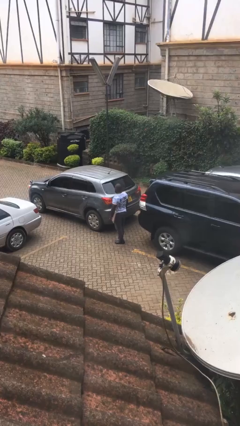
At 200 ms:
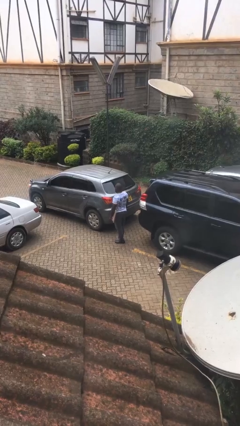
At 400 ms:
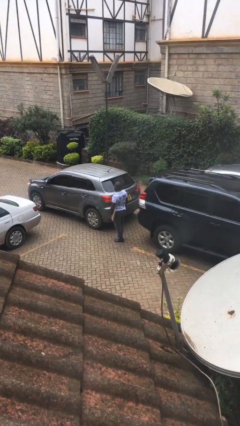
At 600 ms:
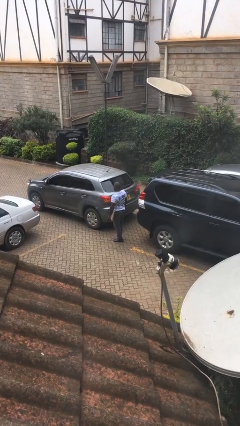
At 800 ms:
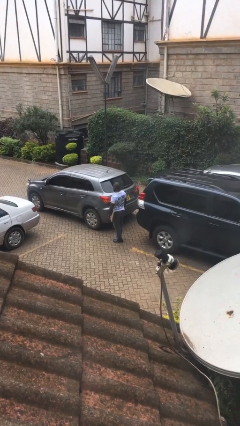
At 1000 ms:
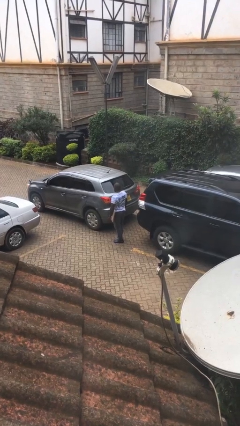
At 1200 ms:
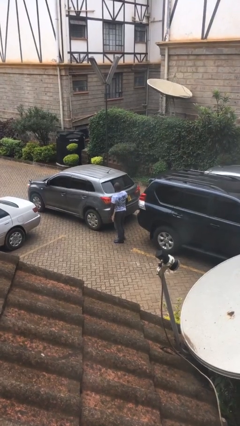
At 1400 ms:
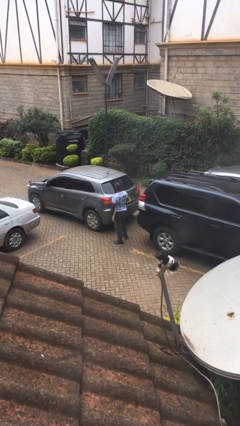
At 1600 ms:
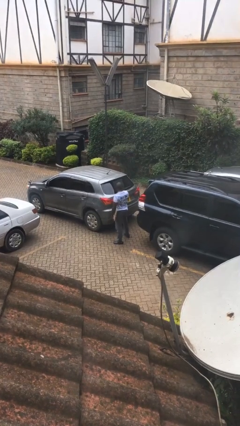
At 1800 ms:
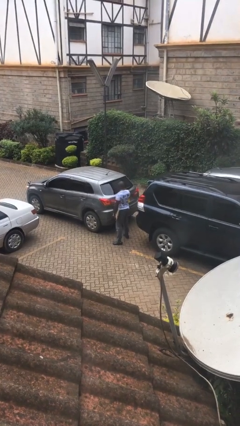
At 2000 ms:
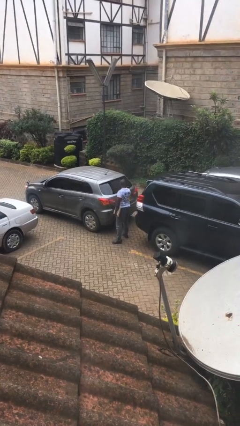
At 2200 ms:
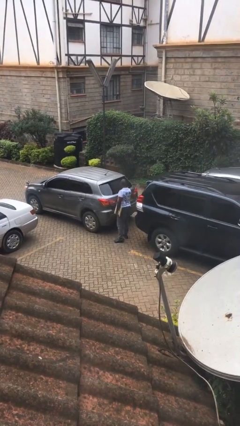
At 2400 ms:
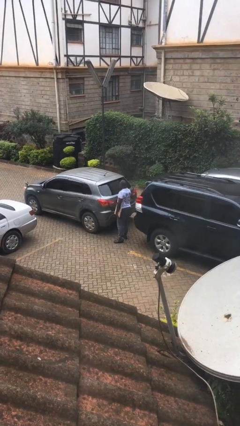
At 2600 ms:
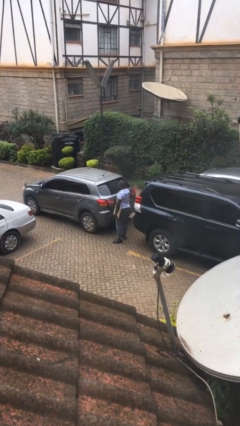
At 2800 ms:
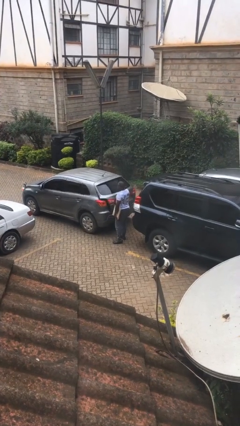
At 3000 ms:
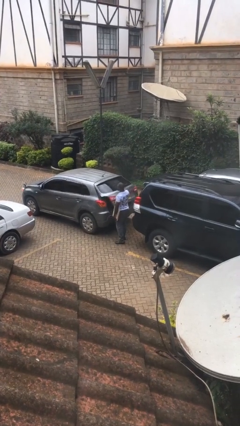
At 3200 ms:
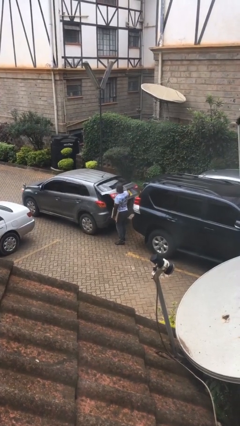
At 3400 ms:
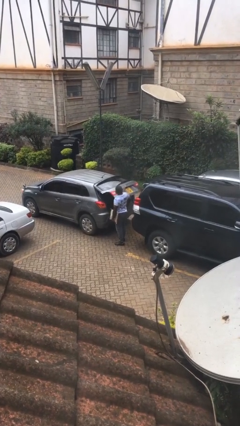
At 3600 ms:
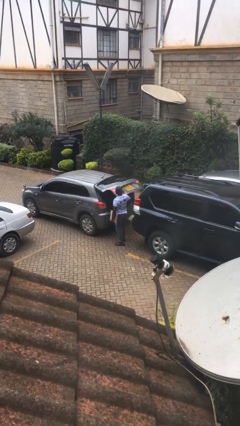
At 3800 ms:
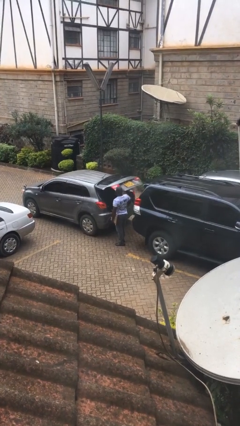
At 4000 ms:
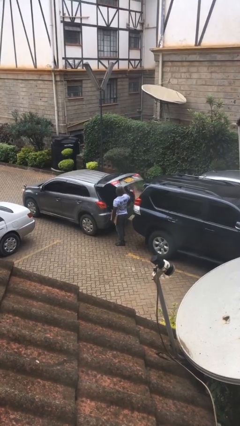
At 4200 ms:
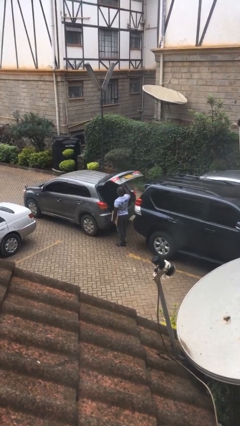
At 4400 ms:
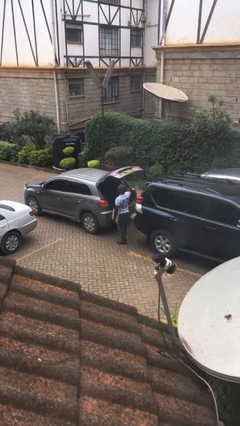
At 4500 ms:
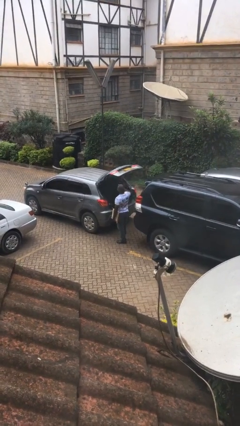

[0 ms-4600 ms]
person opens car trunk

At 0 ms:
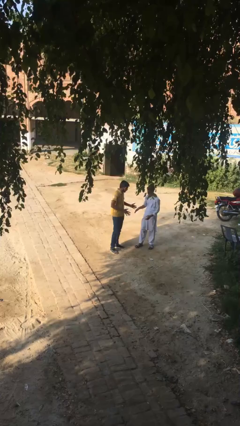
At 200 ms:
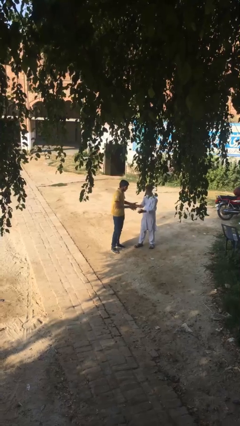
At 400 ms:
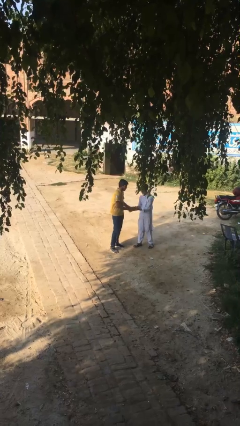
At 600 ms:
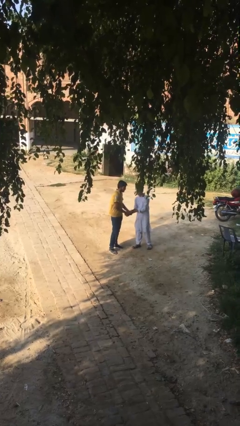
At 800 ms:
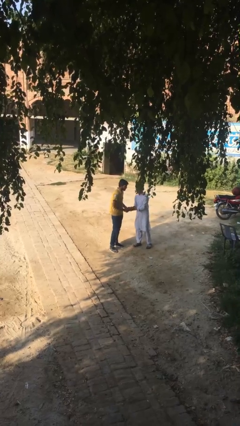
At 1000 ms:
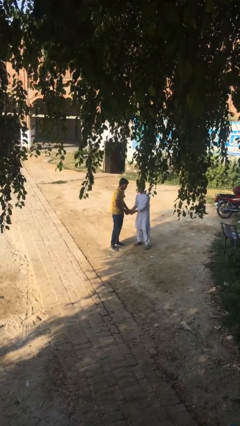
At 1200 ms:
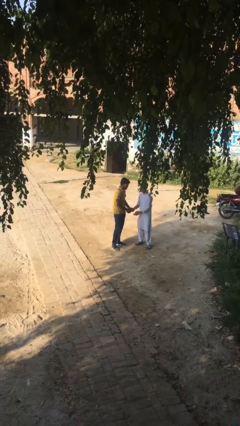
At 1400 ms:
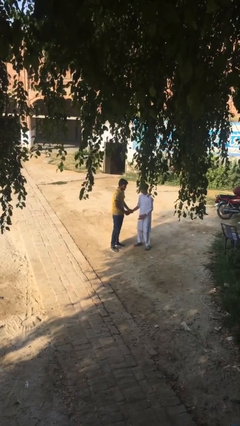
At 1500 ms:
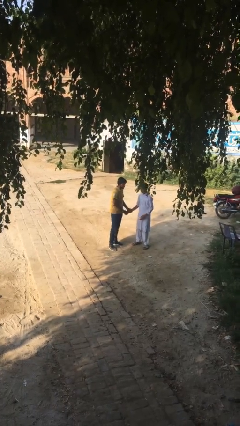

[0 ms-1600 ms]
person shakes hand

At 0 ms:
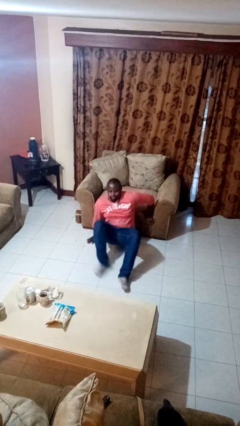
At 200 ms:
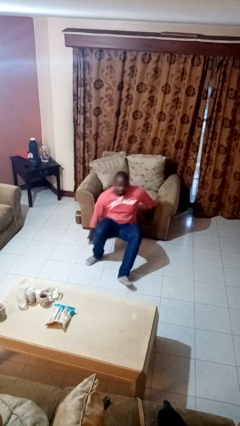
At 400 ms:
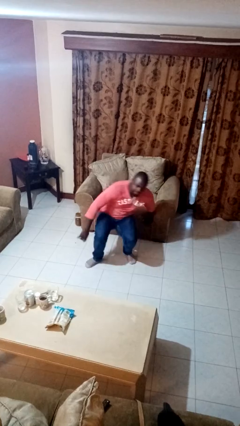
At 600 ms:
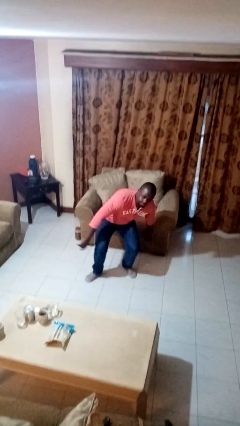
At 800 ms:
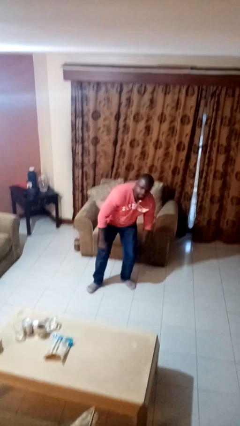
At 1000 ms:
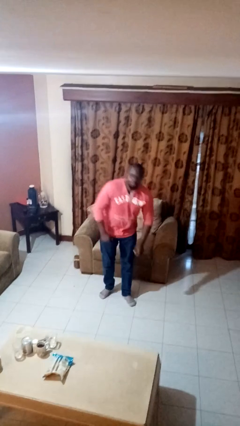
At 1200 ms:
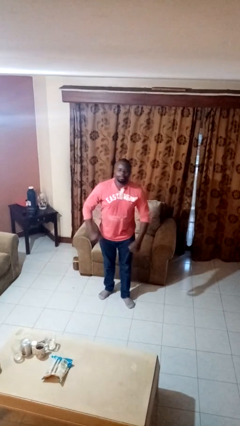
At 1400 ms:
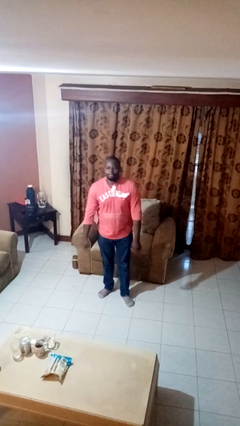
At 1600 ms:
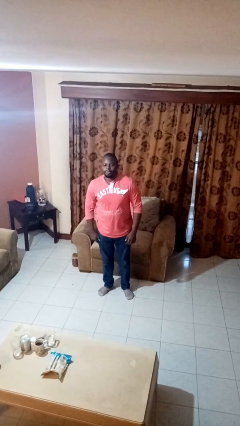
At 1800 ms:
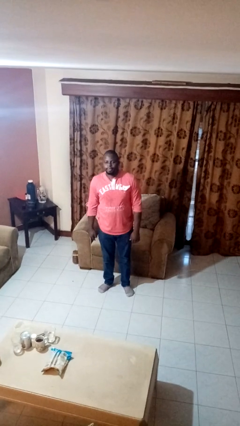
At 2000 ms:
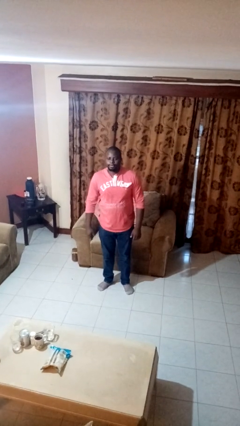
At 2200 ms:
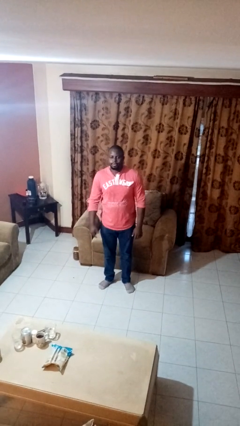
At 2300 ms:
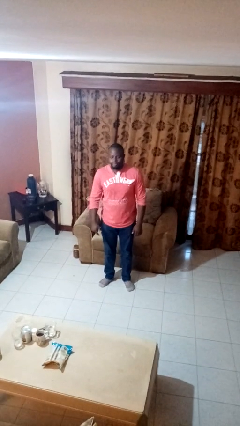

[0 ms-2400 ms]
person stands up from floor

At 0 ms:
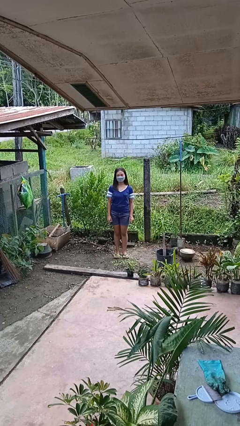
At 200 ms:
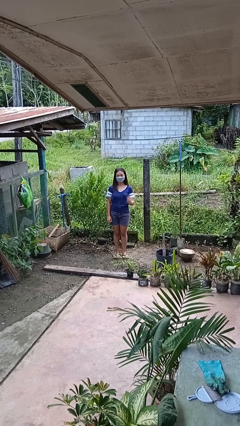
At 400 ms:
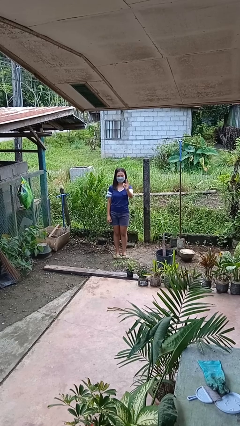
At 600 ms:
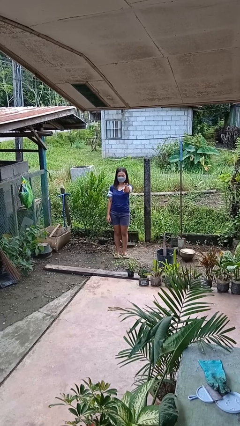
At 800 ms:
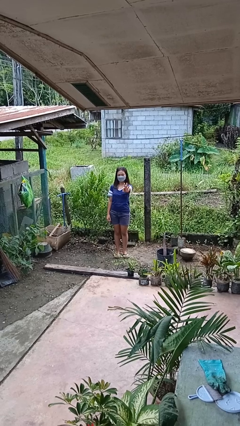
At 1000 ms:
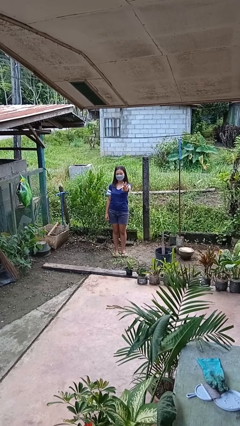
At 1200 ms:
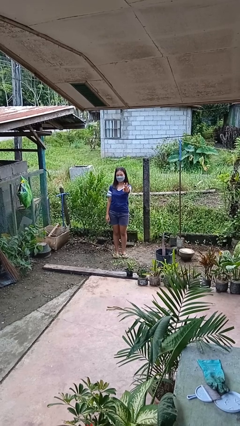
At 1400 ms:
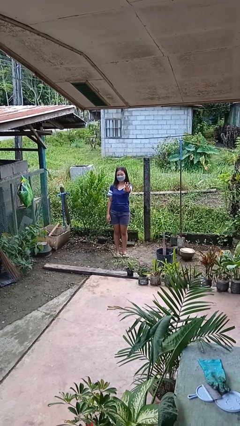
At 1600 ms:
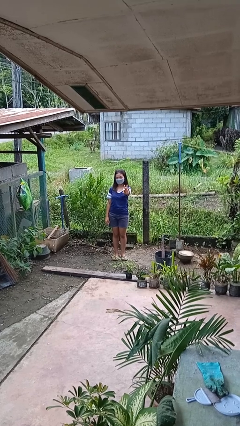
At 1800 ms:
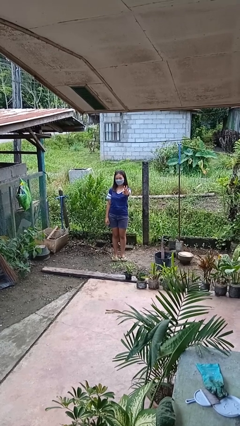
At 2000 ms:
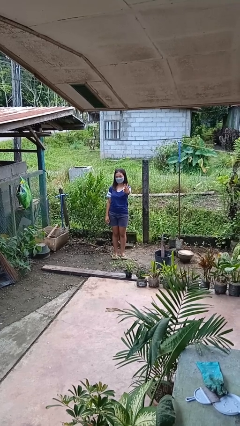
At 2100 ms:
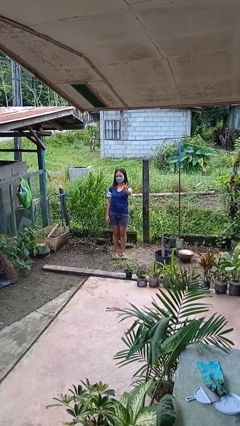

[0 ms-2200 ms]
person gestures number three

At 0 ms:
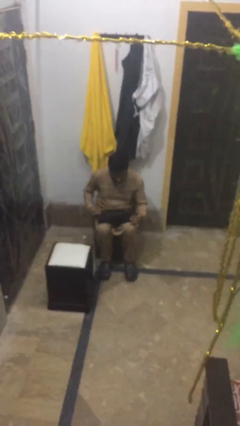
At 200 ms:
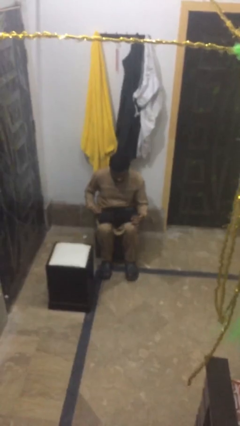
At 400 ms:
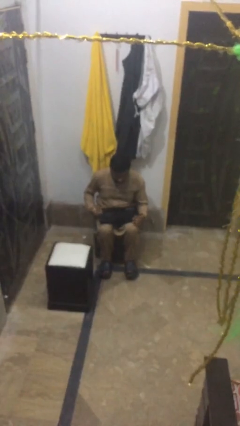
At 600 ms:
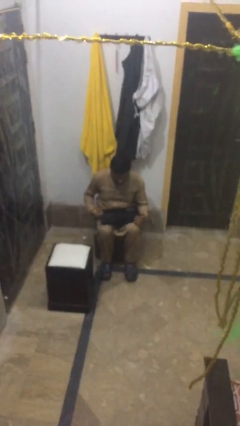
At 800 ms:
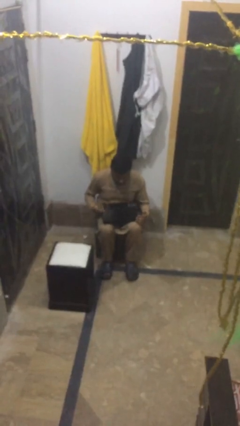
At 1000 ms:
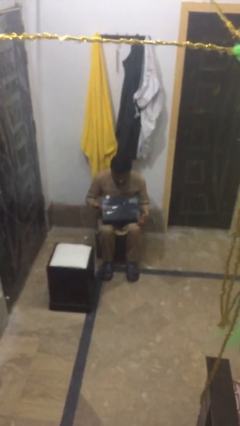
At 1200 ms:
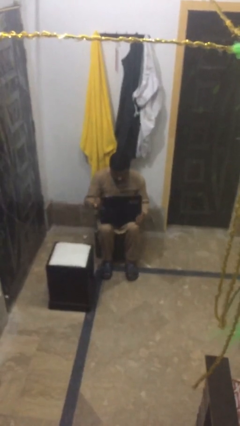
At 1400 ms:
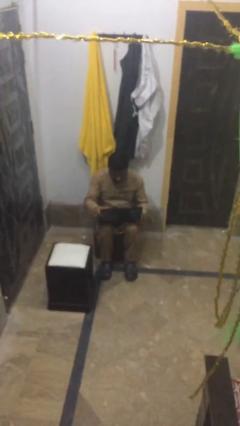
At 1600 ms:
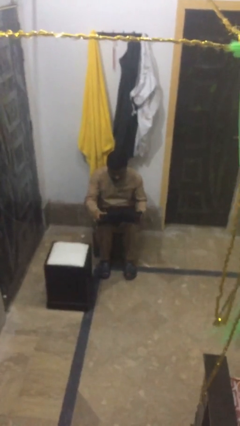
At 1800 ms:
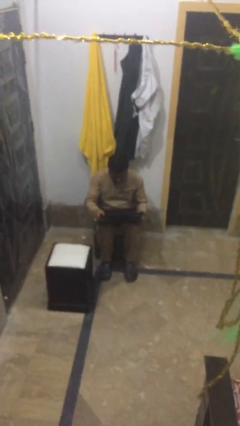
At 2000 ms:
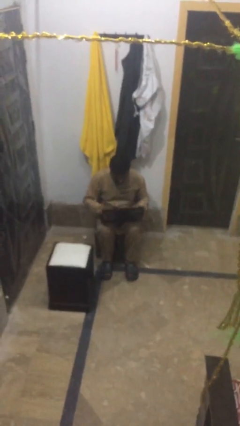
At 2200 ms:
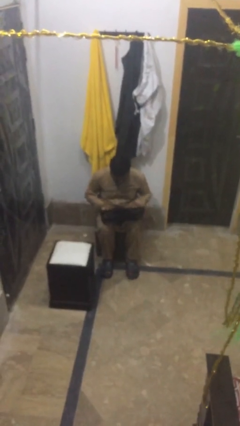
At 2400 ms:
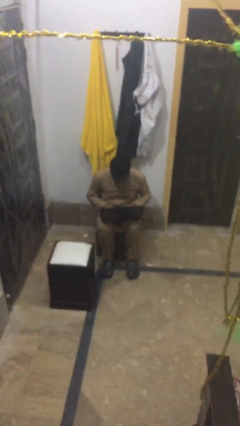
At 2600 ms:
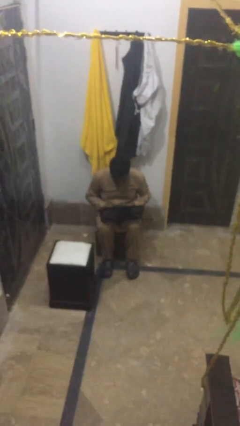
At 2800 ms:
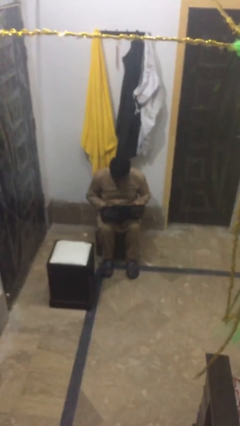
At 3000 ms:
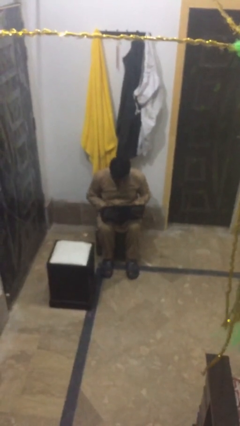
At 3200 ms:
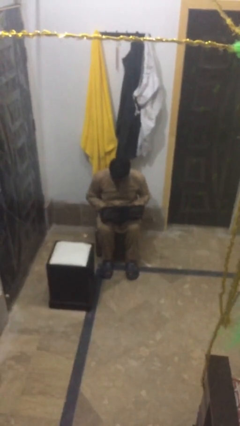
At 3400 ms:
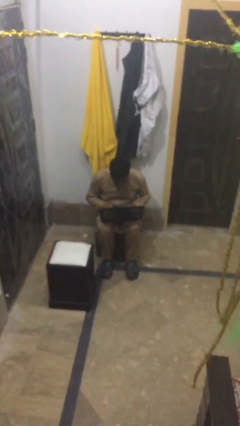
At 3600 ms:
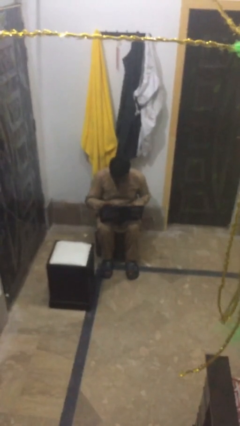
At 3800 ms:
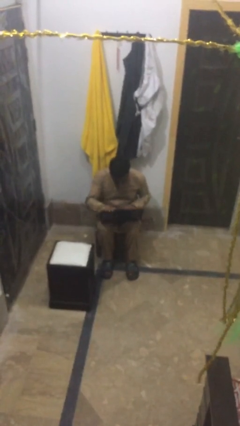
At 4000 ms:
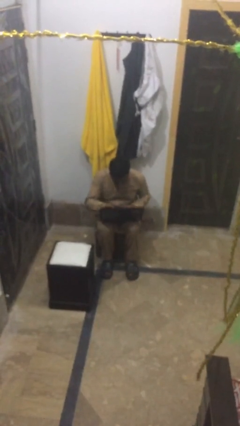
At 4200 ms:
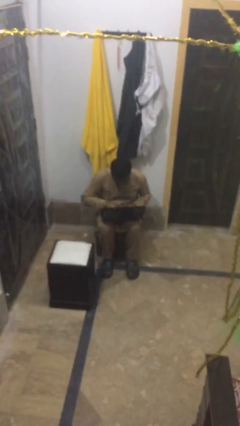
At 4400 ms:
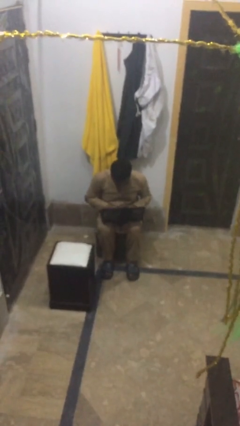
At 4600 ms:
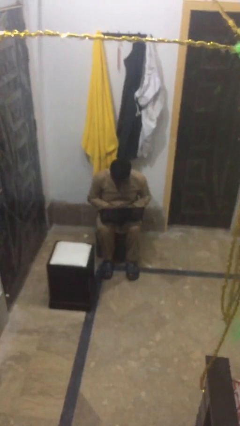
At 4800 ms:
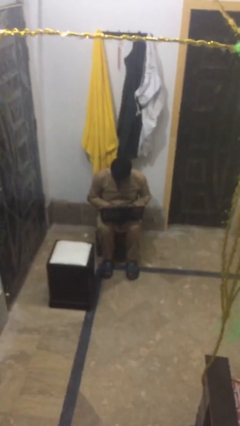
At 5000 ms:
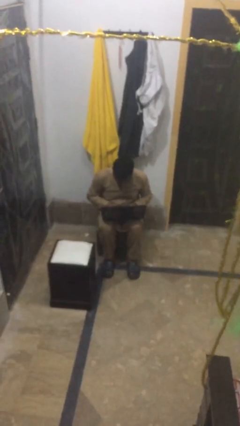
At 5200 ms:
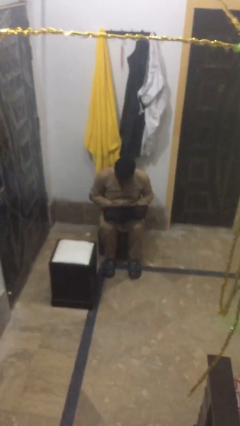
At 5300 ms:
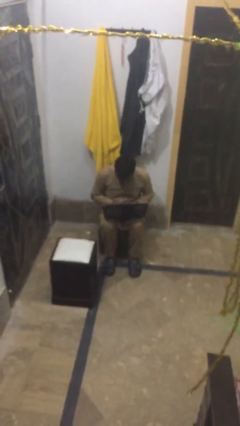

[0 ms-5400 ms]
person interacts with laptop

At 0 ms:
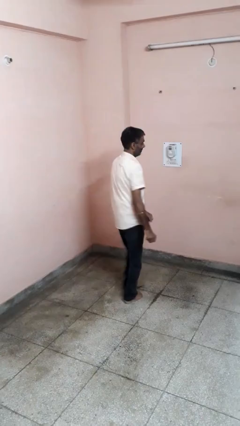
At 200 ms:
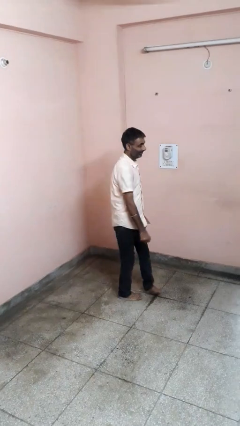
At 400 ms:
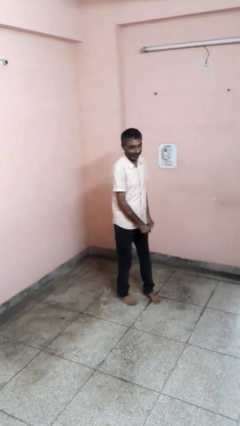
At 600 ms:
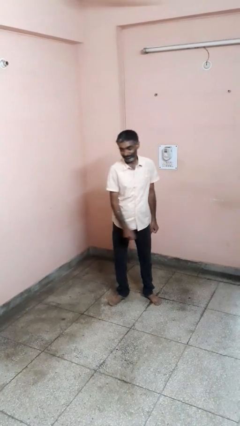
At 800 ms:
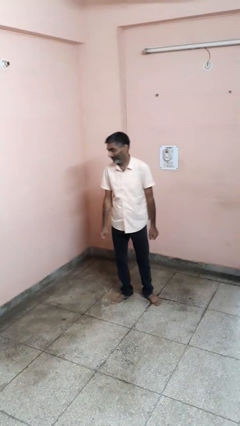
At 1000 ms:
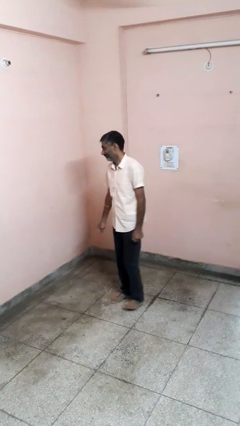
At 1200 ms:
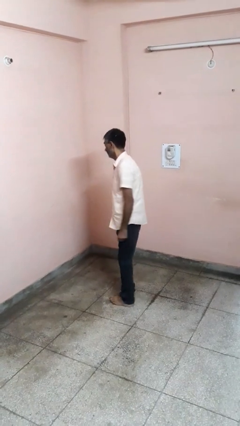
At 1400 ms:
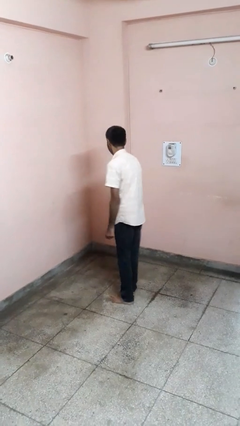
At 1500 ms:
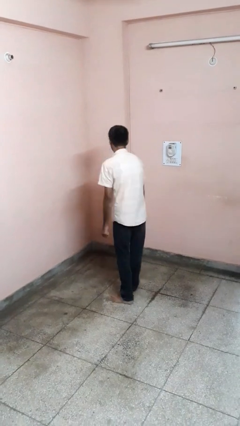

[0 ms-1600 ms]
person twirls
